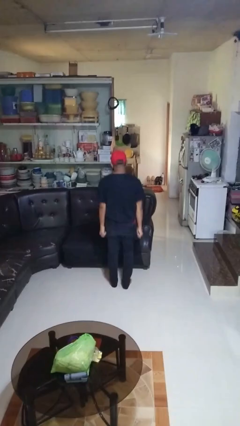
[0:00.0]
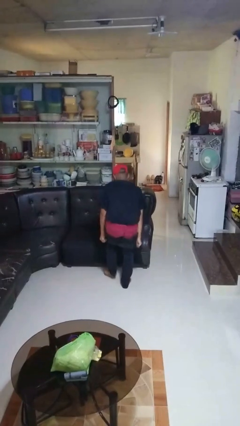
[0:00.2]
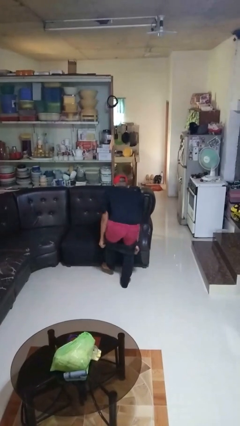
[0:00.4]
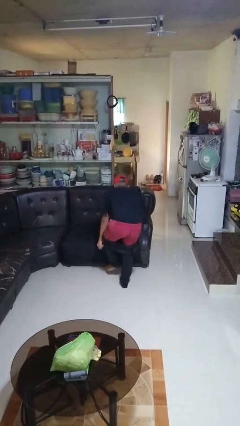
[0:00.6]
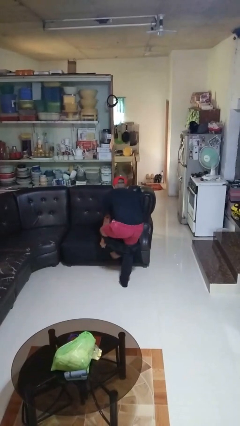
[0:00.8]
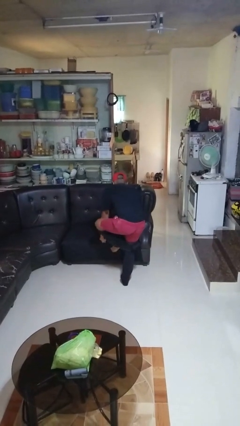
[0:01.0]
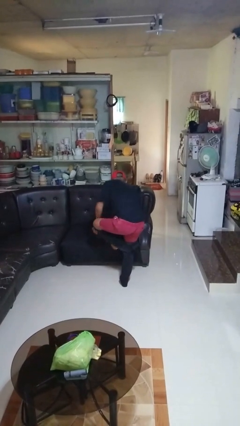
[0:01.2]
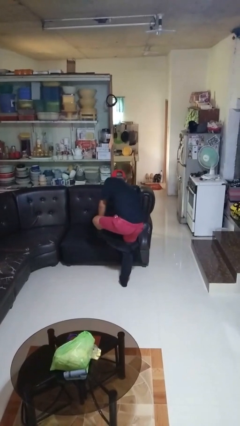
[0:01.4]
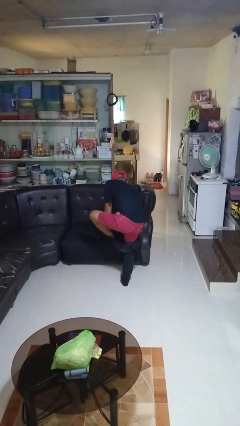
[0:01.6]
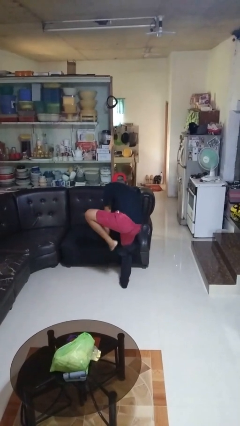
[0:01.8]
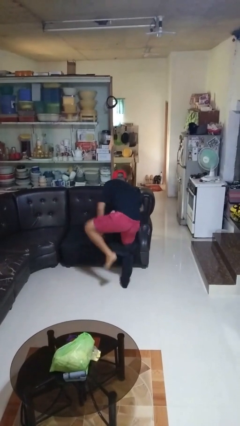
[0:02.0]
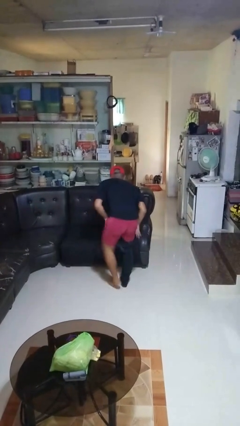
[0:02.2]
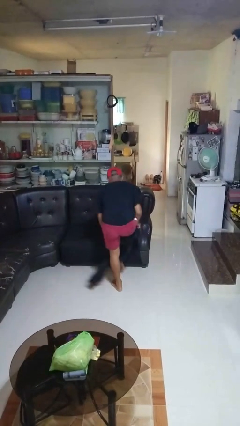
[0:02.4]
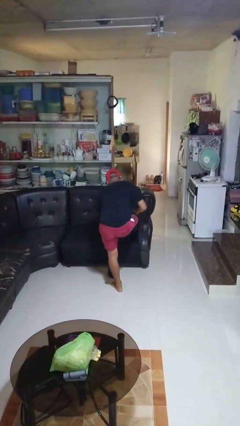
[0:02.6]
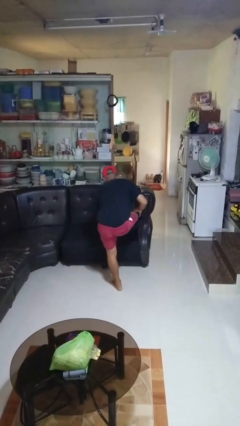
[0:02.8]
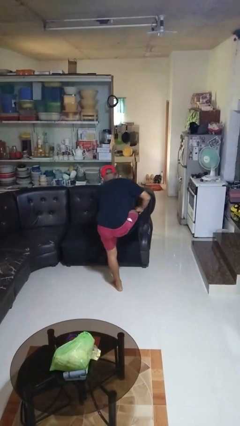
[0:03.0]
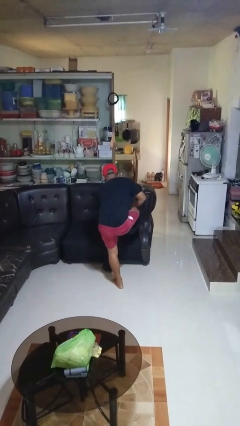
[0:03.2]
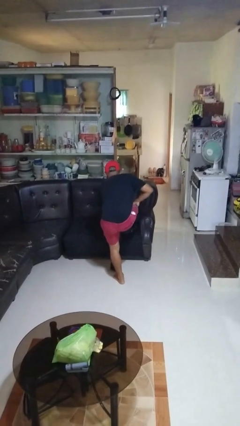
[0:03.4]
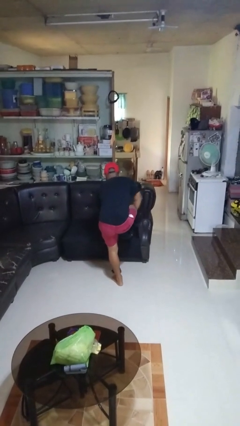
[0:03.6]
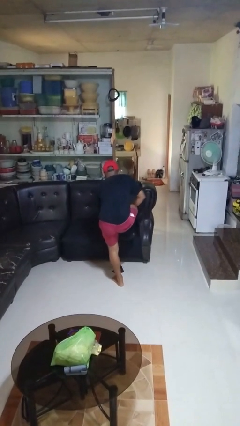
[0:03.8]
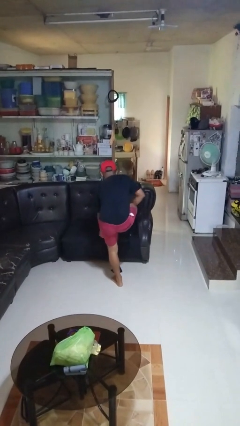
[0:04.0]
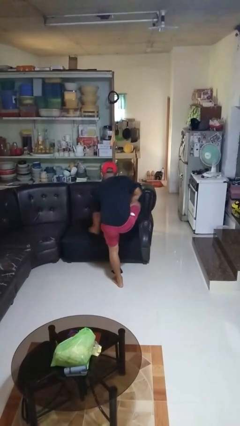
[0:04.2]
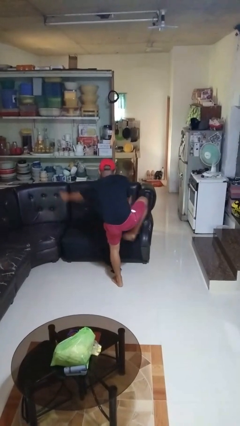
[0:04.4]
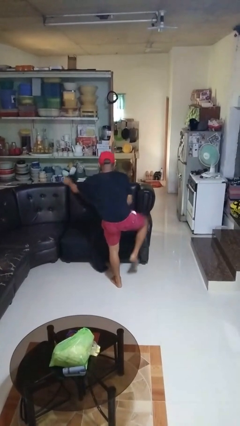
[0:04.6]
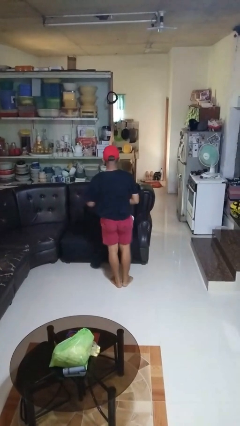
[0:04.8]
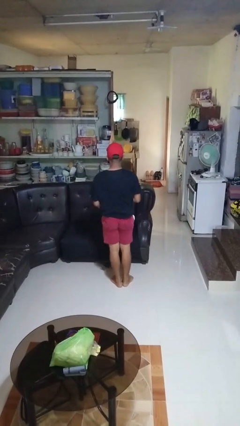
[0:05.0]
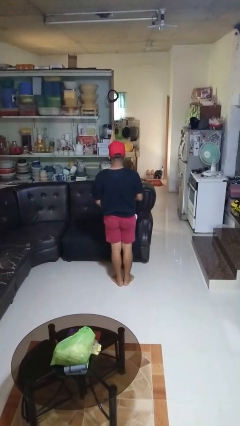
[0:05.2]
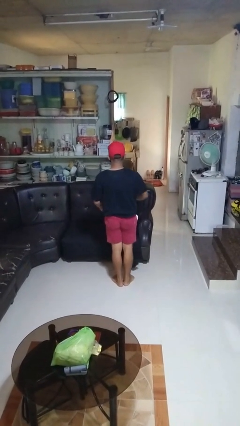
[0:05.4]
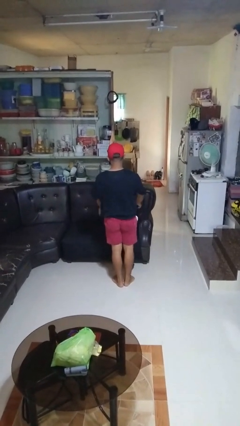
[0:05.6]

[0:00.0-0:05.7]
person takes off pants

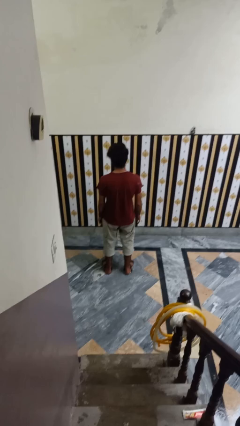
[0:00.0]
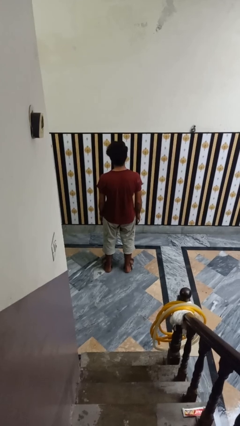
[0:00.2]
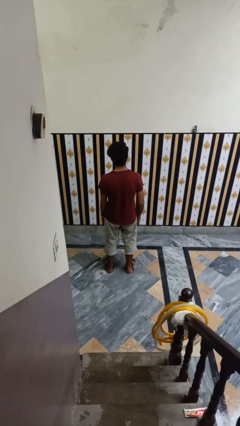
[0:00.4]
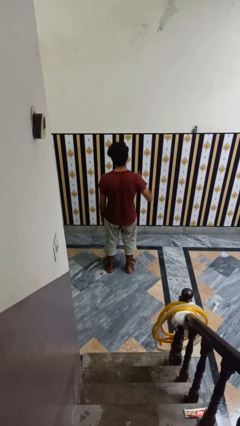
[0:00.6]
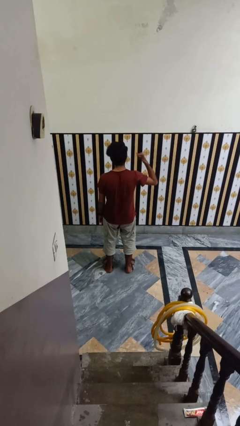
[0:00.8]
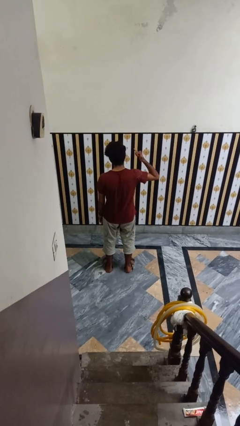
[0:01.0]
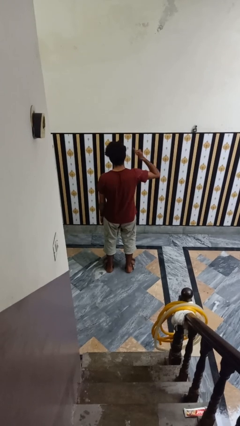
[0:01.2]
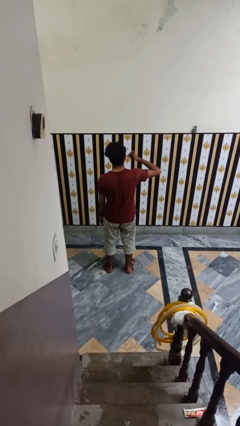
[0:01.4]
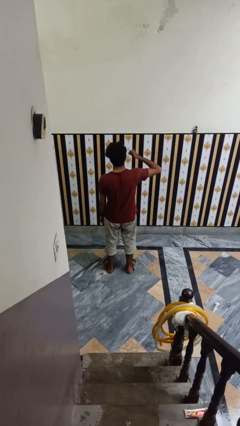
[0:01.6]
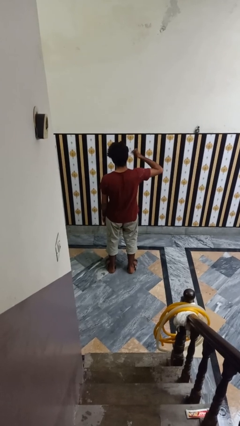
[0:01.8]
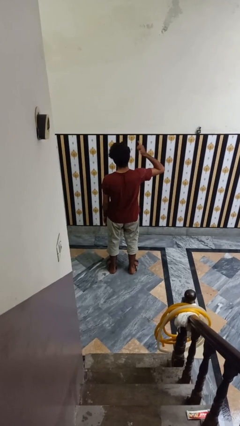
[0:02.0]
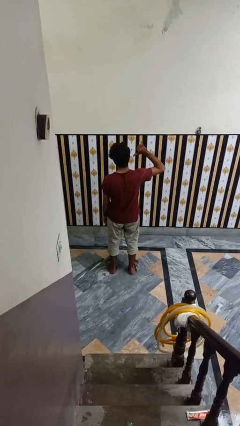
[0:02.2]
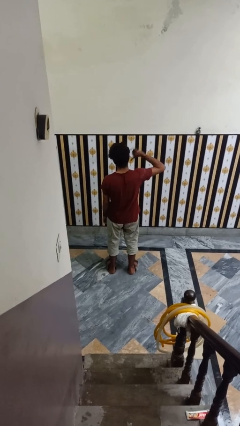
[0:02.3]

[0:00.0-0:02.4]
person gestures hang loose

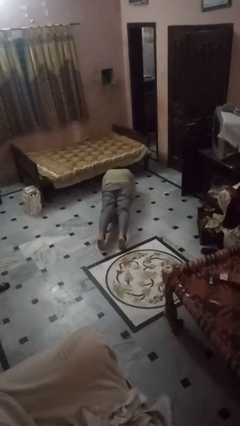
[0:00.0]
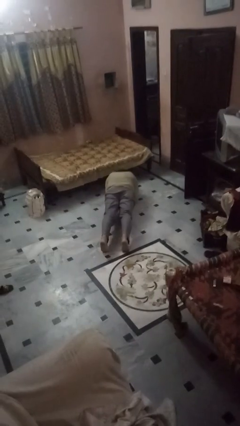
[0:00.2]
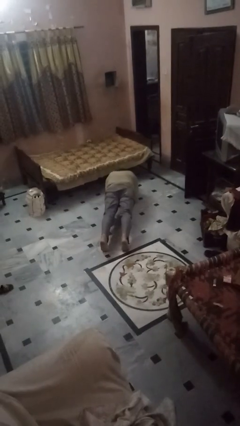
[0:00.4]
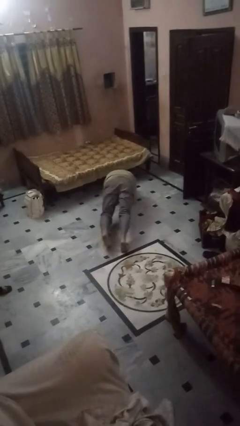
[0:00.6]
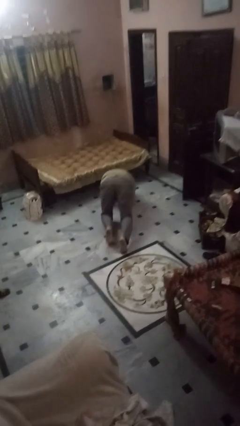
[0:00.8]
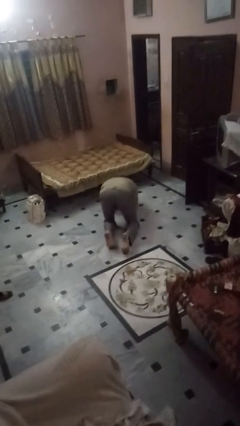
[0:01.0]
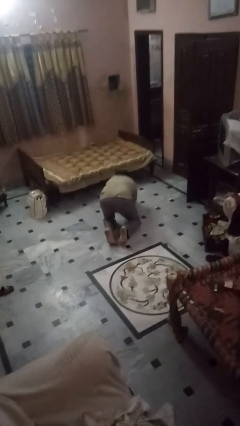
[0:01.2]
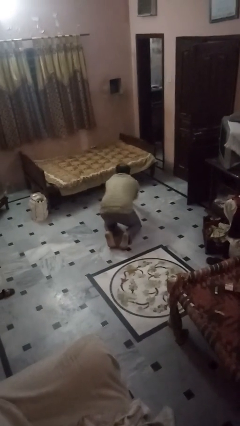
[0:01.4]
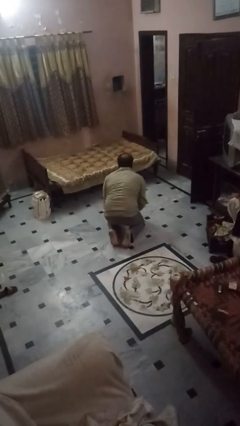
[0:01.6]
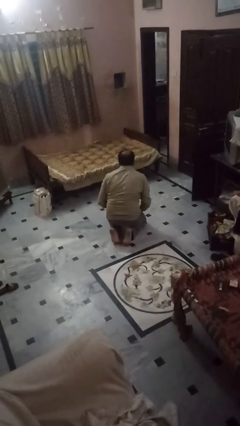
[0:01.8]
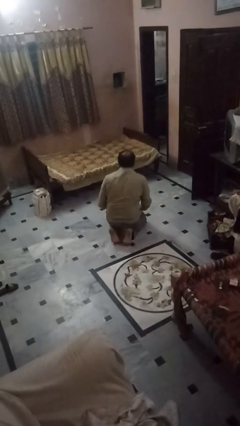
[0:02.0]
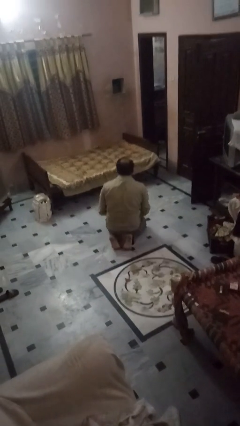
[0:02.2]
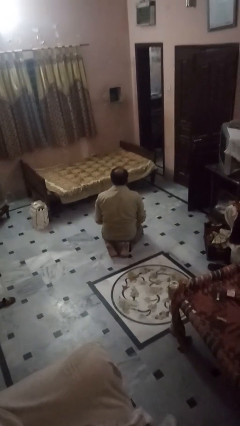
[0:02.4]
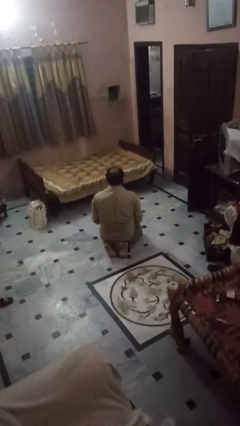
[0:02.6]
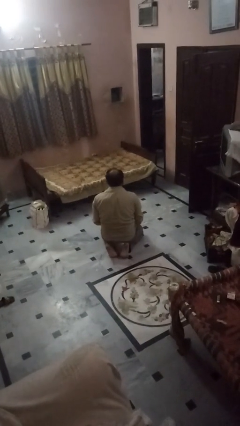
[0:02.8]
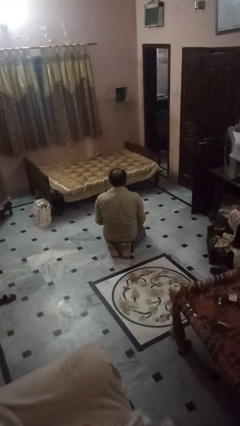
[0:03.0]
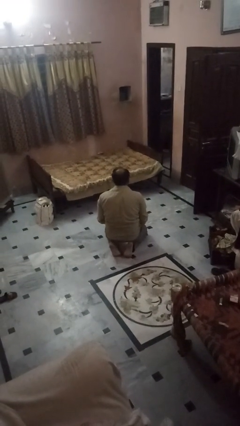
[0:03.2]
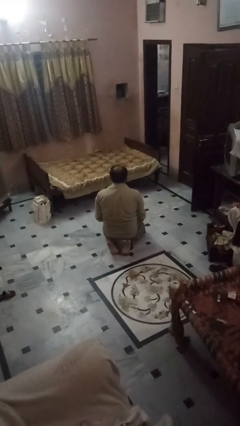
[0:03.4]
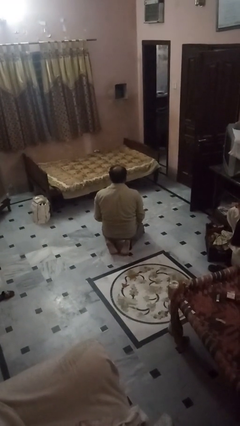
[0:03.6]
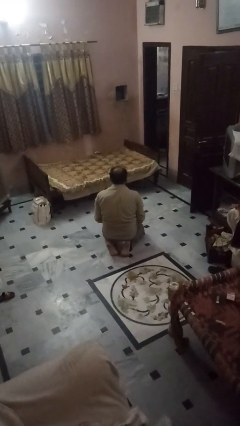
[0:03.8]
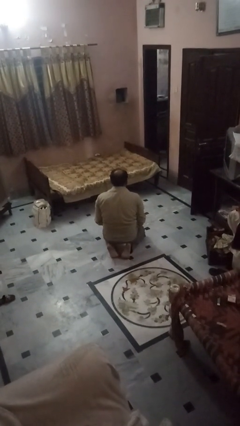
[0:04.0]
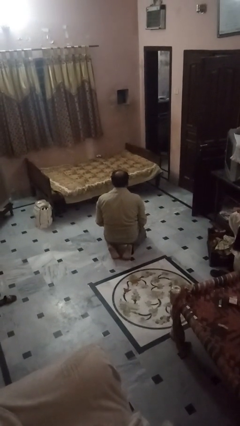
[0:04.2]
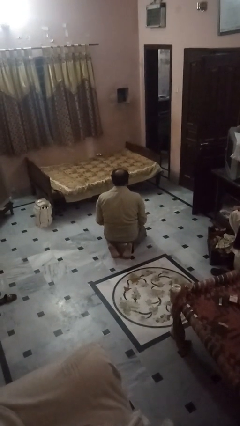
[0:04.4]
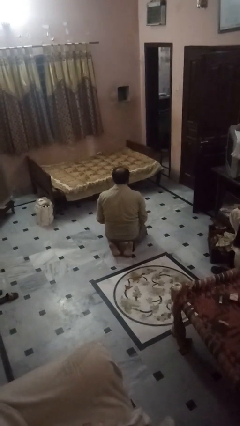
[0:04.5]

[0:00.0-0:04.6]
person stands up from floor

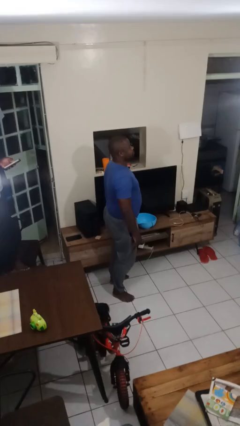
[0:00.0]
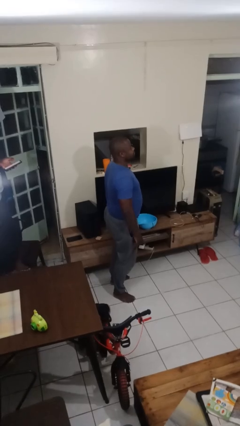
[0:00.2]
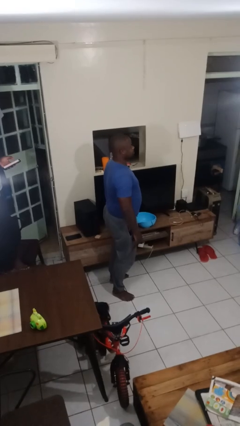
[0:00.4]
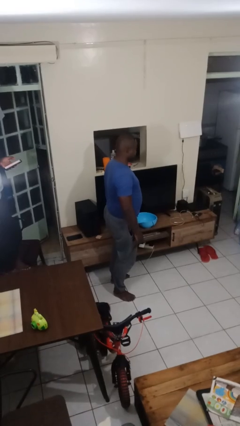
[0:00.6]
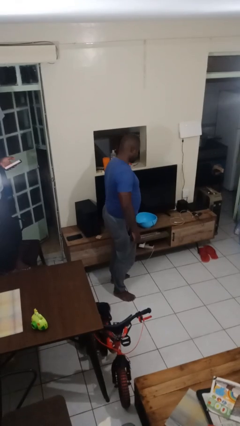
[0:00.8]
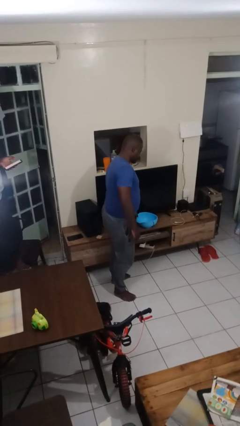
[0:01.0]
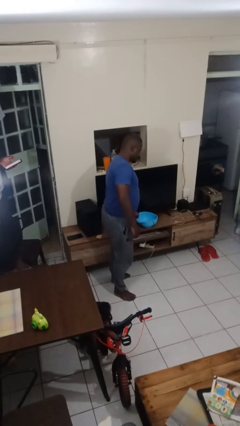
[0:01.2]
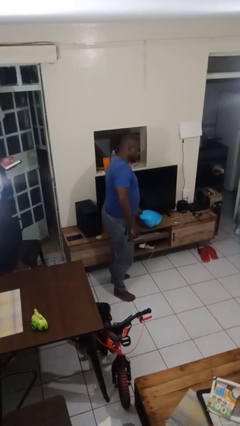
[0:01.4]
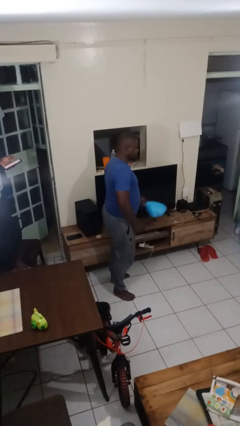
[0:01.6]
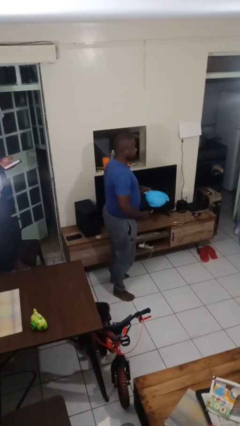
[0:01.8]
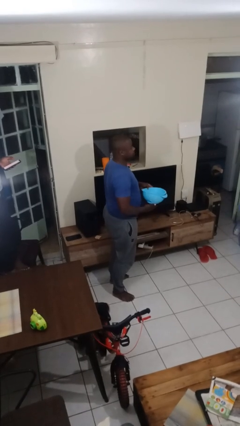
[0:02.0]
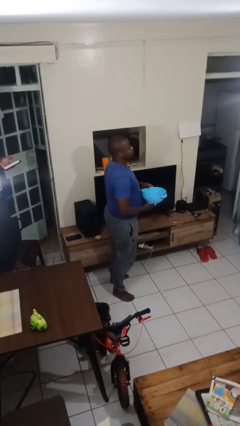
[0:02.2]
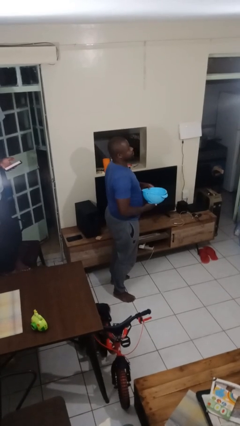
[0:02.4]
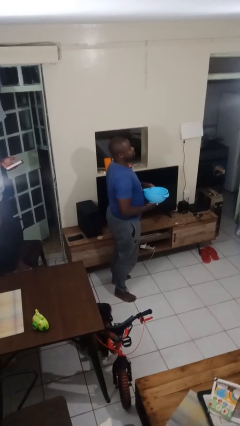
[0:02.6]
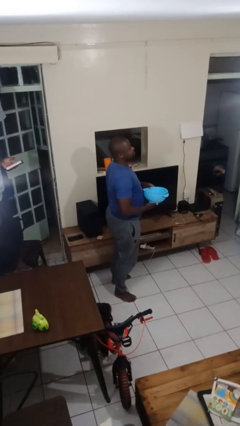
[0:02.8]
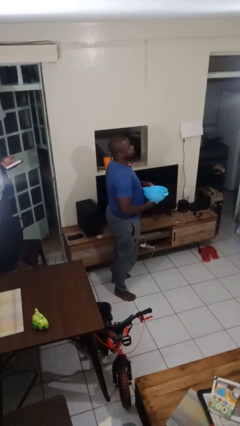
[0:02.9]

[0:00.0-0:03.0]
person picks up object from countertop

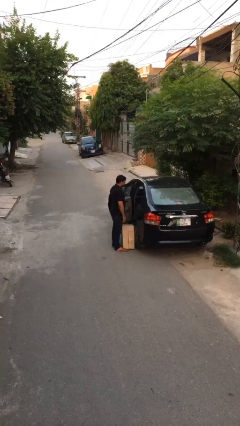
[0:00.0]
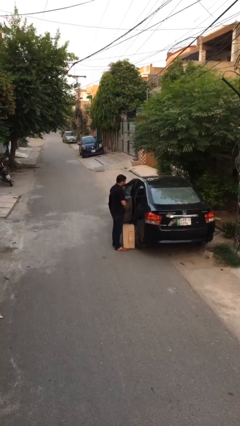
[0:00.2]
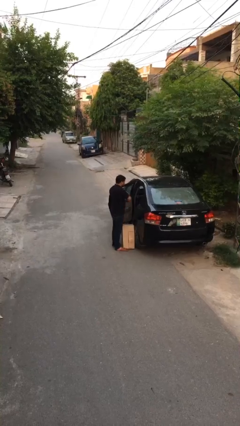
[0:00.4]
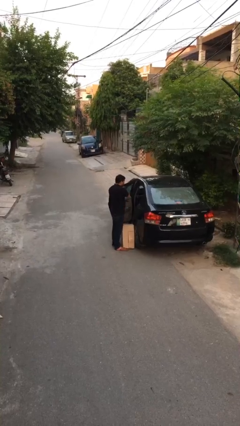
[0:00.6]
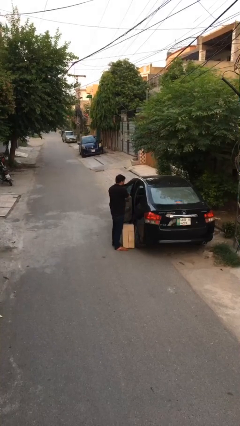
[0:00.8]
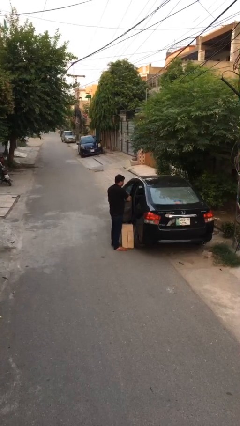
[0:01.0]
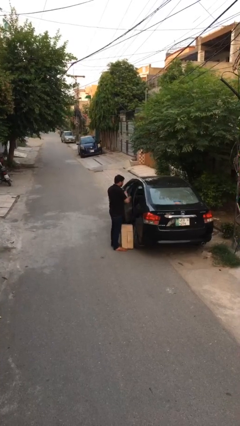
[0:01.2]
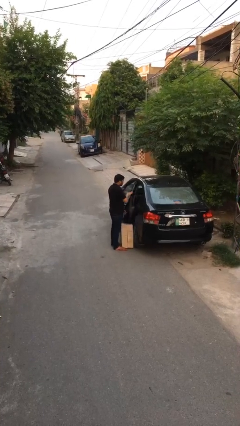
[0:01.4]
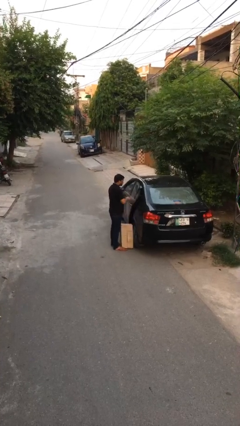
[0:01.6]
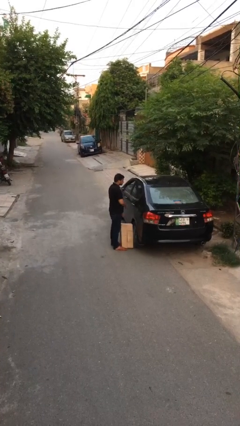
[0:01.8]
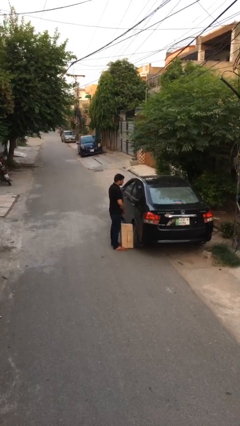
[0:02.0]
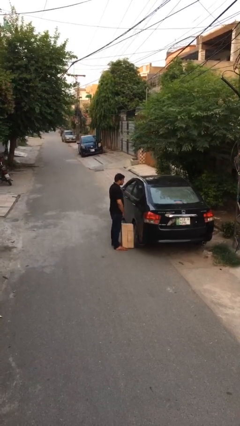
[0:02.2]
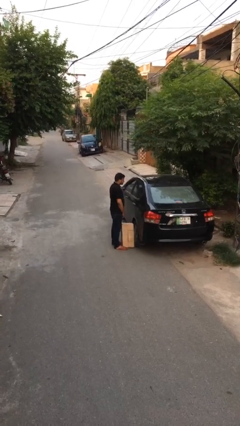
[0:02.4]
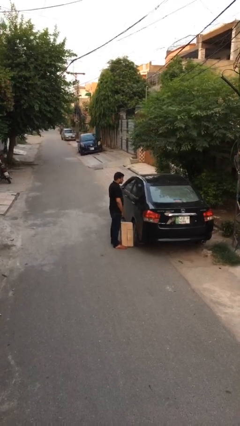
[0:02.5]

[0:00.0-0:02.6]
person closes car door
